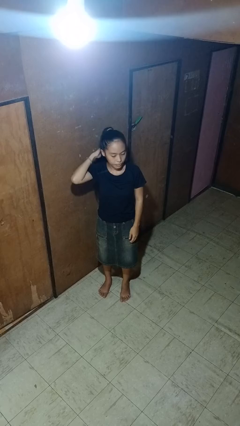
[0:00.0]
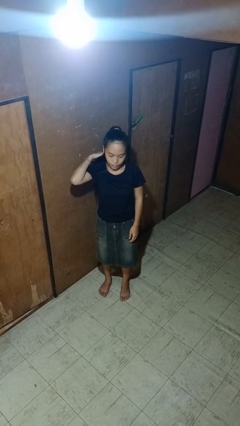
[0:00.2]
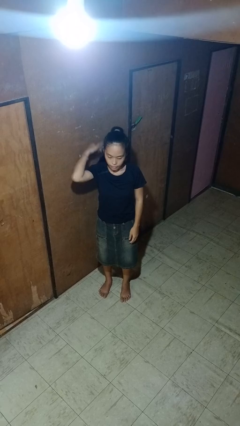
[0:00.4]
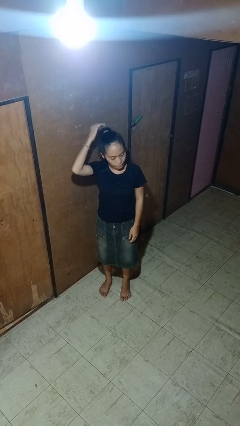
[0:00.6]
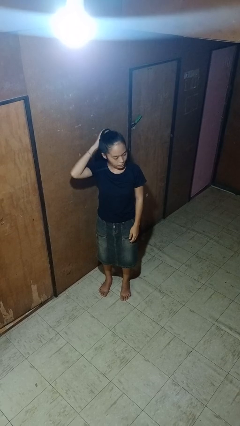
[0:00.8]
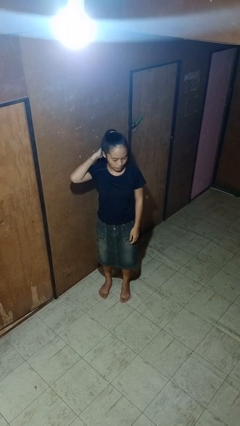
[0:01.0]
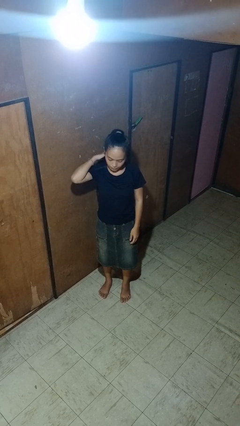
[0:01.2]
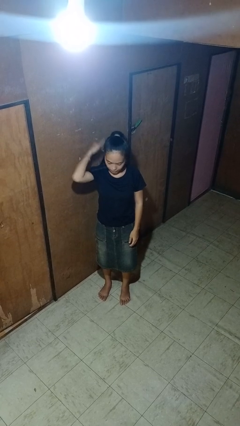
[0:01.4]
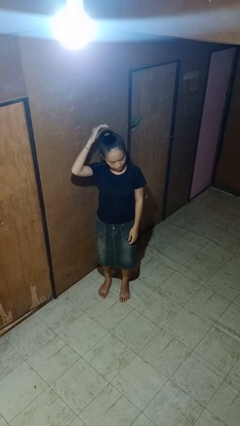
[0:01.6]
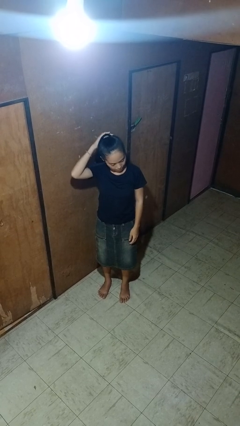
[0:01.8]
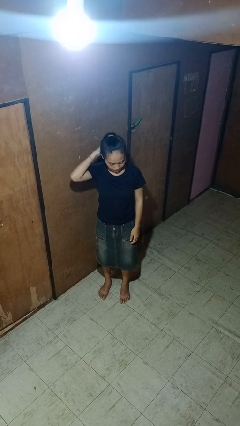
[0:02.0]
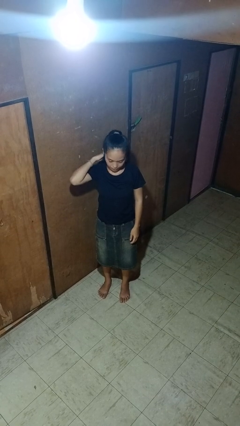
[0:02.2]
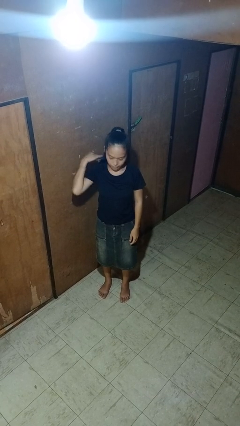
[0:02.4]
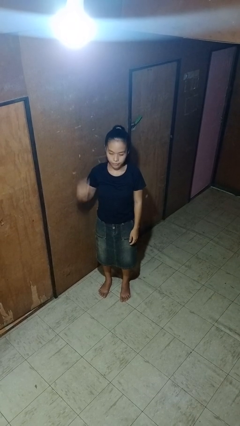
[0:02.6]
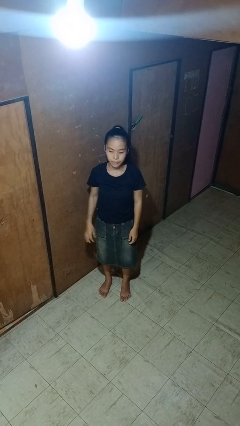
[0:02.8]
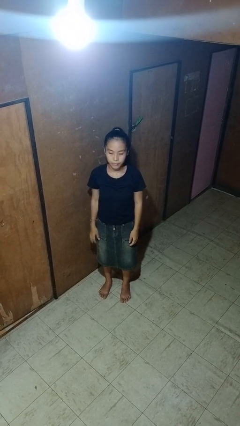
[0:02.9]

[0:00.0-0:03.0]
person strokes hair

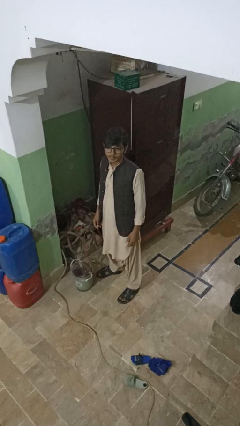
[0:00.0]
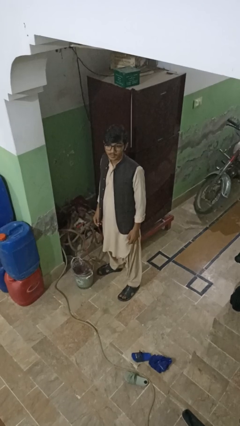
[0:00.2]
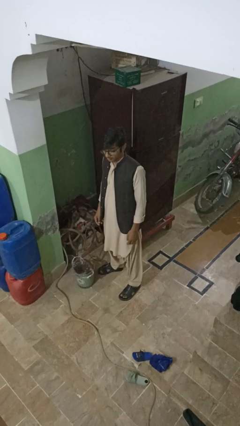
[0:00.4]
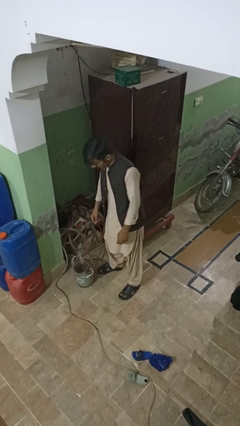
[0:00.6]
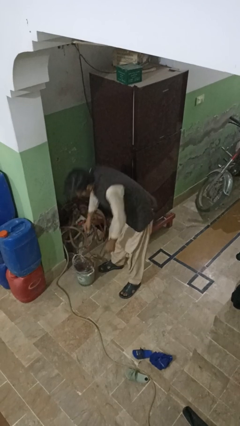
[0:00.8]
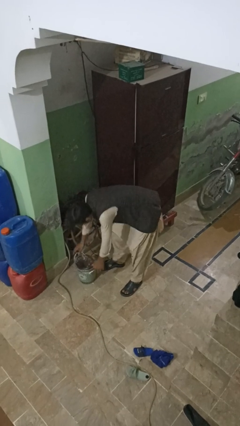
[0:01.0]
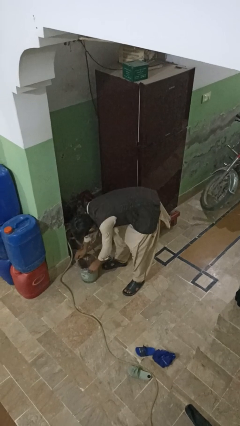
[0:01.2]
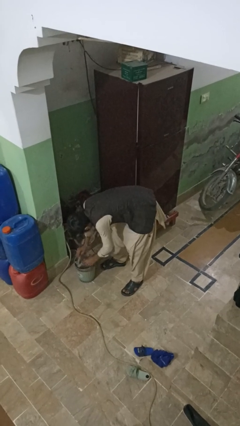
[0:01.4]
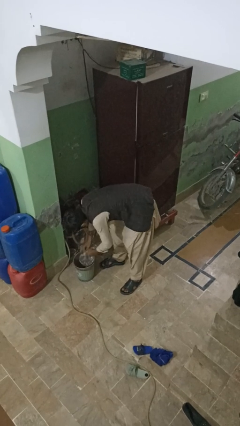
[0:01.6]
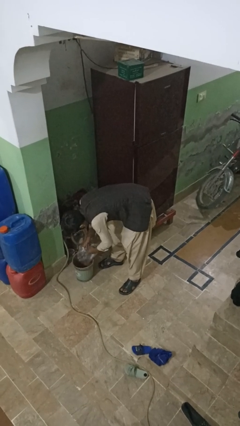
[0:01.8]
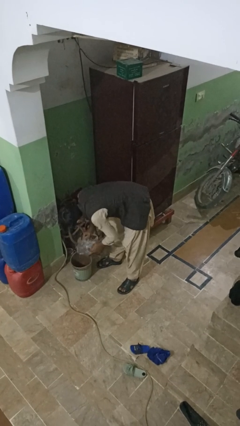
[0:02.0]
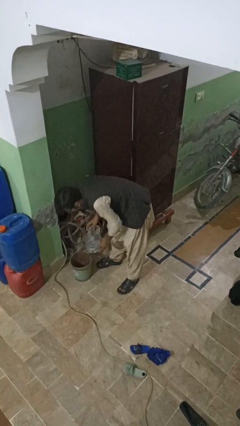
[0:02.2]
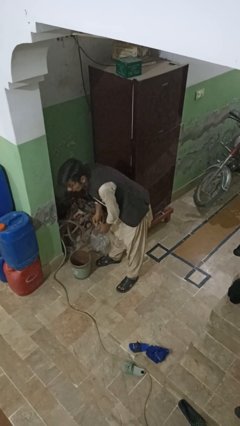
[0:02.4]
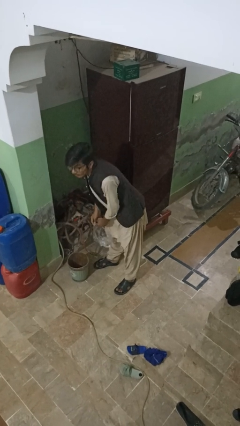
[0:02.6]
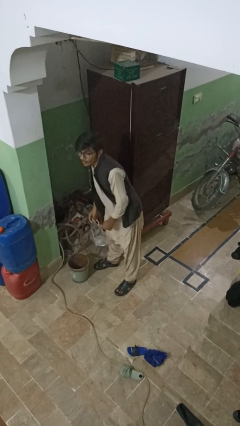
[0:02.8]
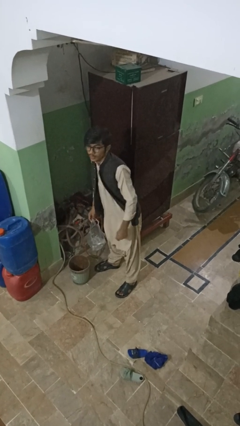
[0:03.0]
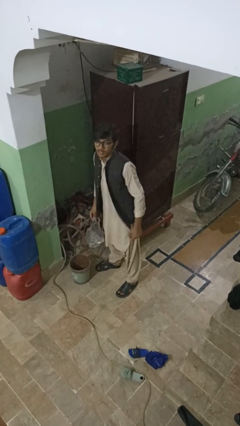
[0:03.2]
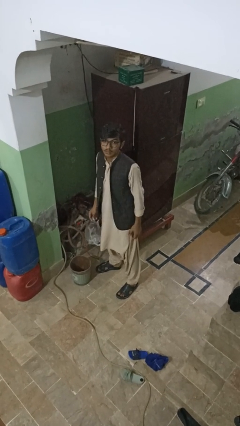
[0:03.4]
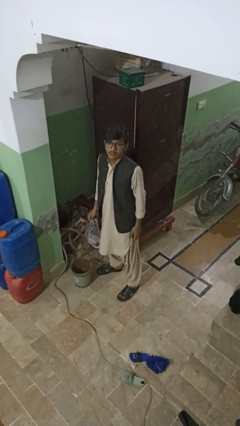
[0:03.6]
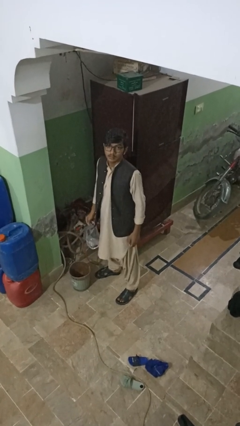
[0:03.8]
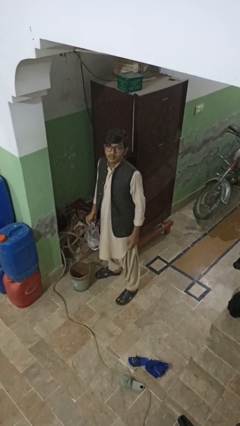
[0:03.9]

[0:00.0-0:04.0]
person removes trashbag from trashcan

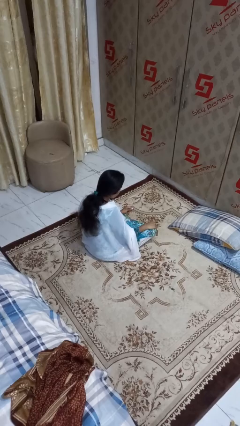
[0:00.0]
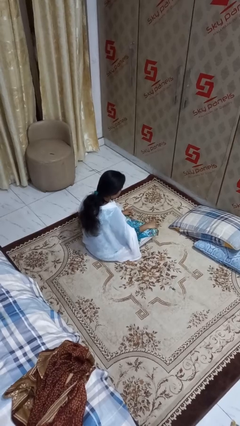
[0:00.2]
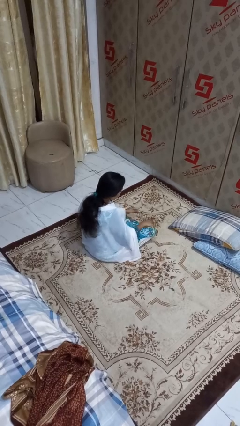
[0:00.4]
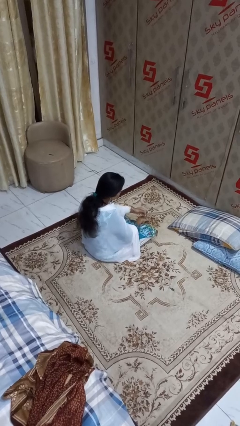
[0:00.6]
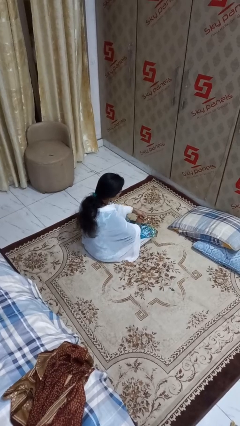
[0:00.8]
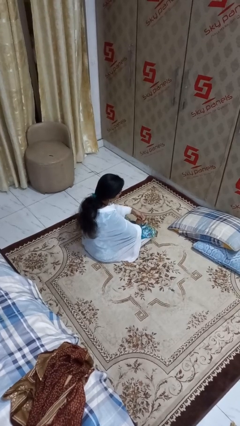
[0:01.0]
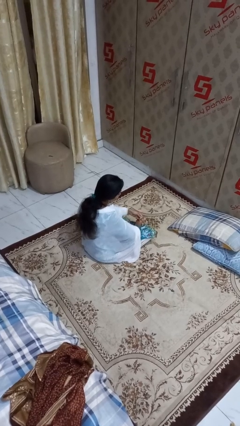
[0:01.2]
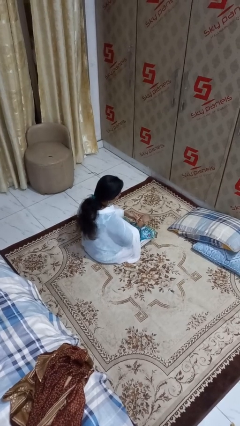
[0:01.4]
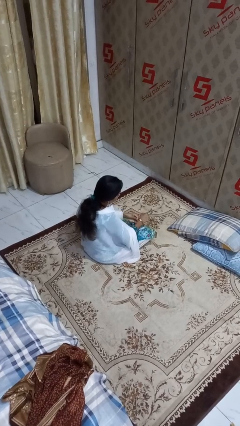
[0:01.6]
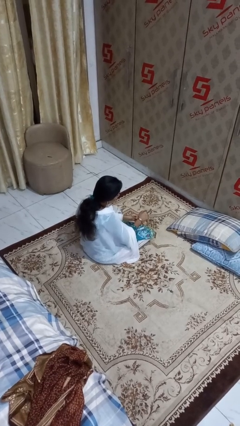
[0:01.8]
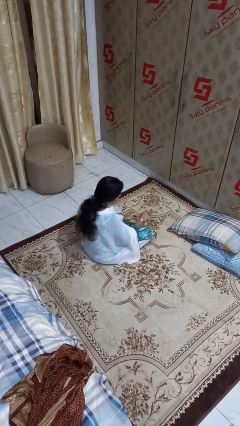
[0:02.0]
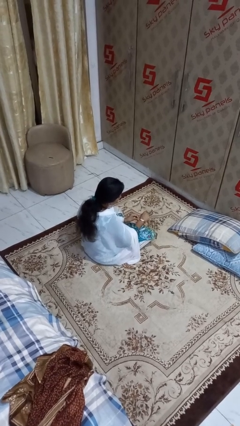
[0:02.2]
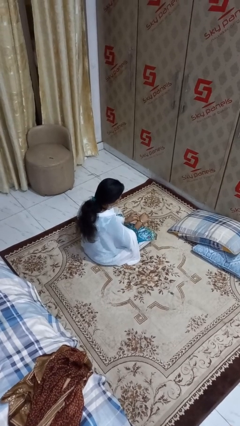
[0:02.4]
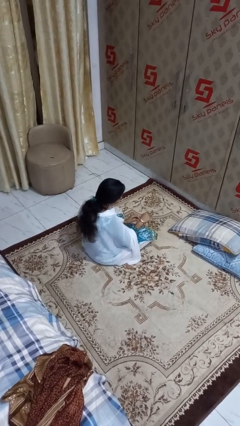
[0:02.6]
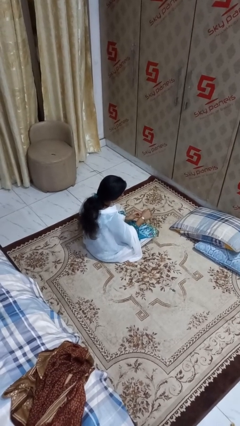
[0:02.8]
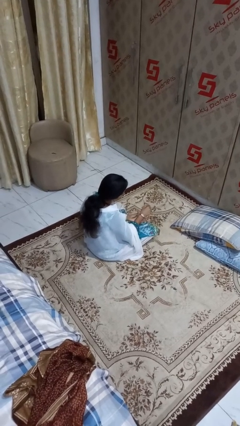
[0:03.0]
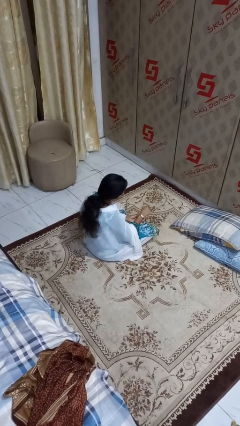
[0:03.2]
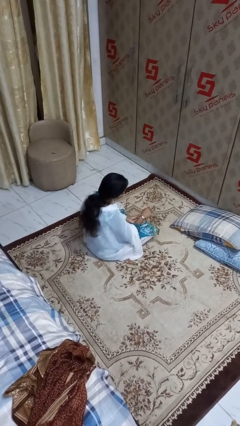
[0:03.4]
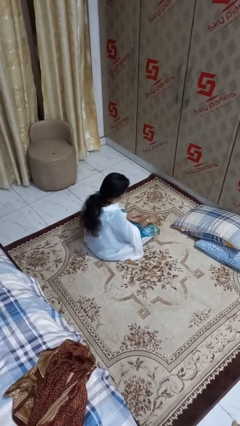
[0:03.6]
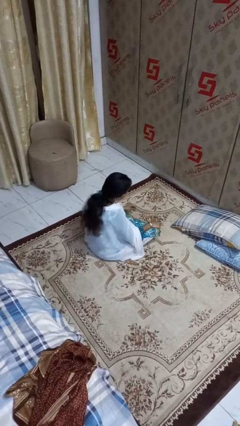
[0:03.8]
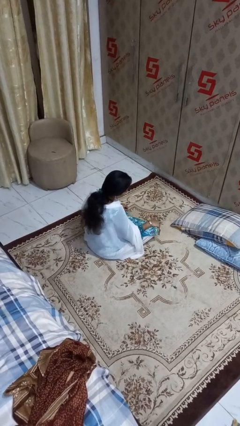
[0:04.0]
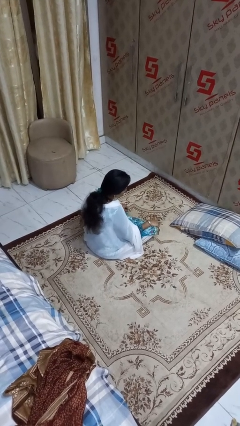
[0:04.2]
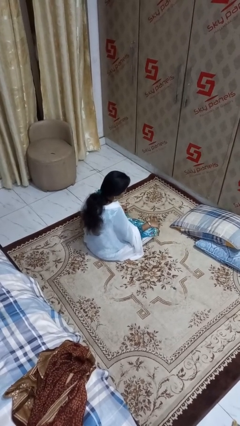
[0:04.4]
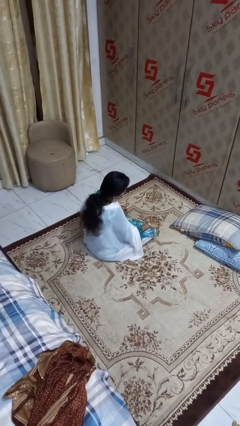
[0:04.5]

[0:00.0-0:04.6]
person puts on wristwatch

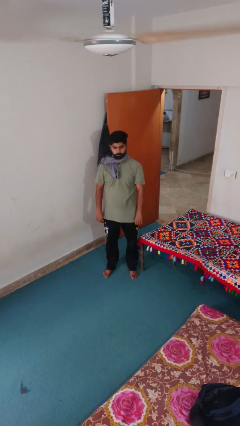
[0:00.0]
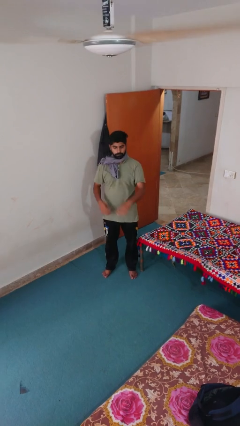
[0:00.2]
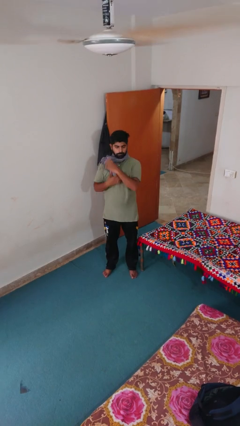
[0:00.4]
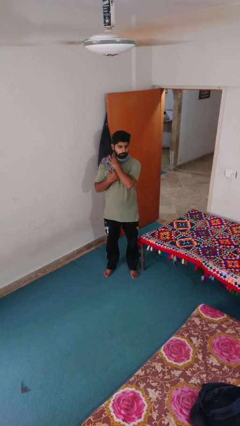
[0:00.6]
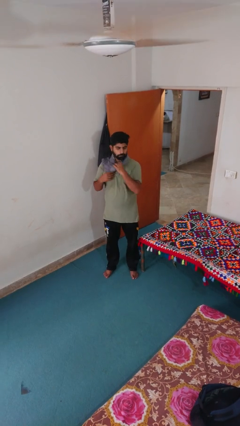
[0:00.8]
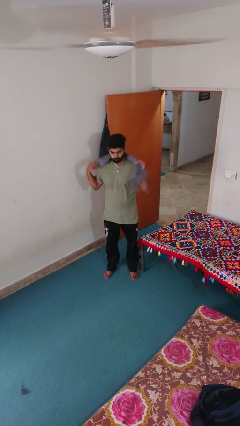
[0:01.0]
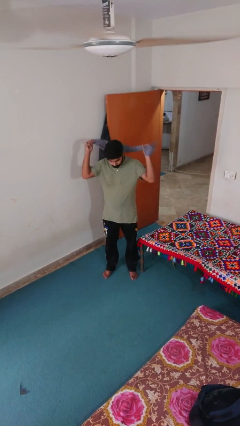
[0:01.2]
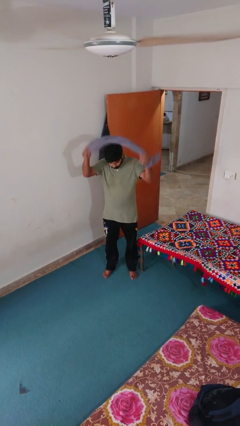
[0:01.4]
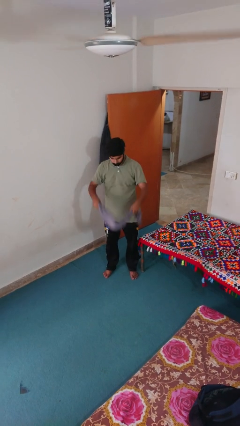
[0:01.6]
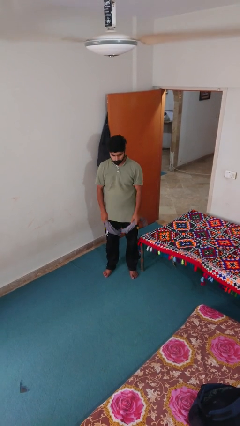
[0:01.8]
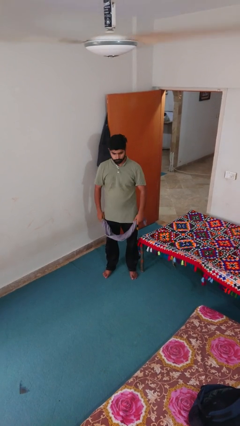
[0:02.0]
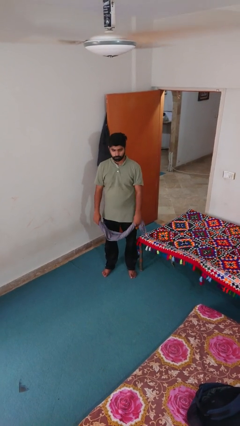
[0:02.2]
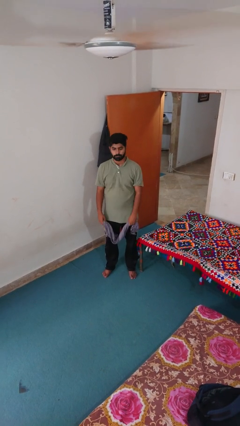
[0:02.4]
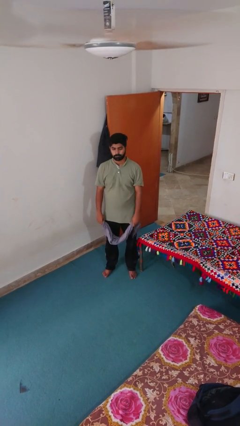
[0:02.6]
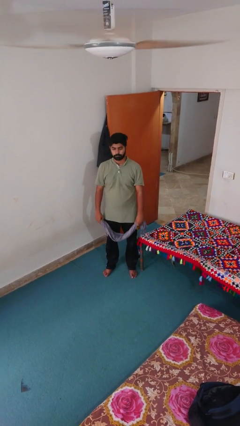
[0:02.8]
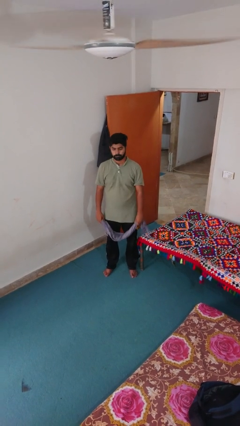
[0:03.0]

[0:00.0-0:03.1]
person takes off scarf

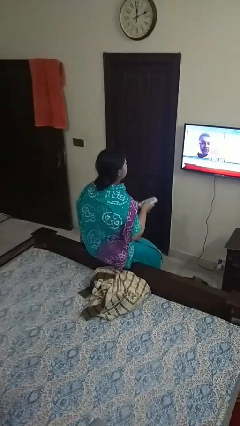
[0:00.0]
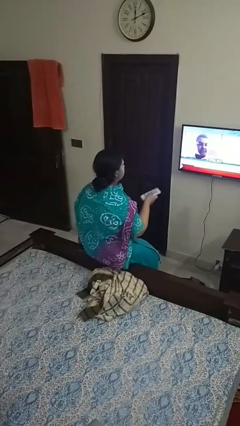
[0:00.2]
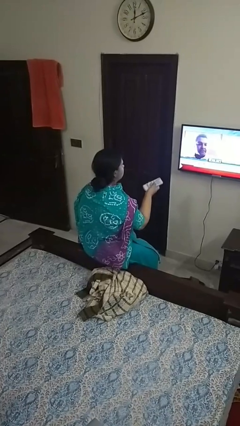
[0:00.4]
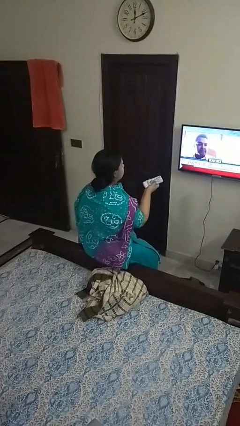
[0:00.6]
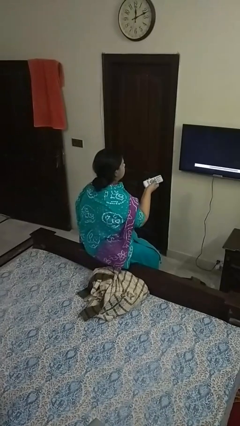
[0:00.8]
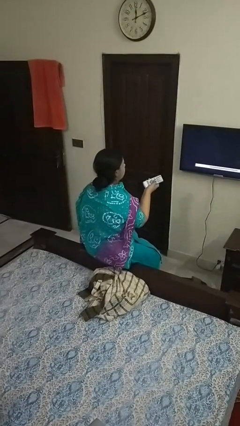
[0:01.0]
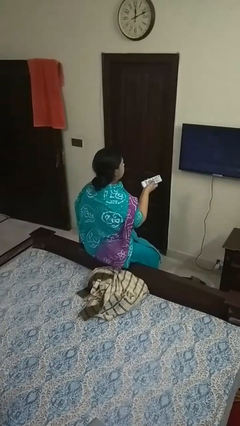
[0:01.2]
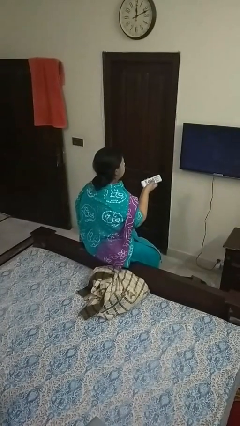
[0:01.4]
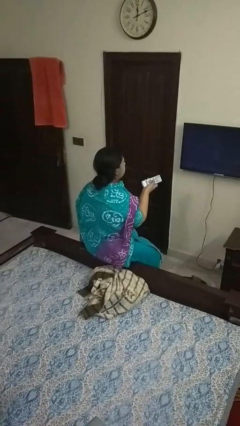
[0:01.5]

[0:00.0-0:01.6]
person uses television remote

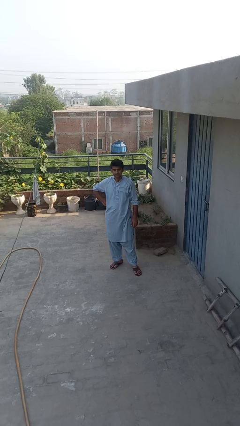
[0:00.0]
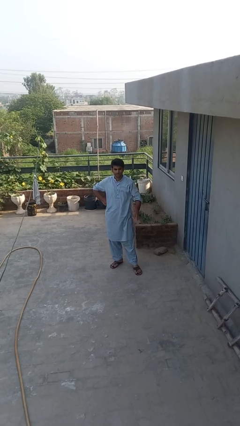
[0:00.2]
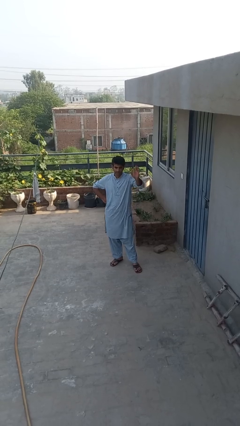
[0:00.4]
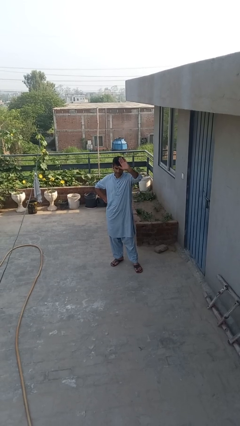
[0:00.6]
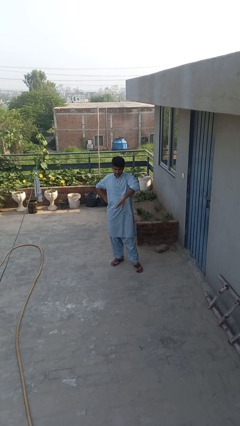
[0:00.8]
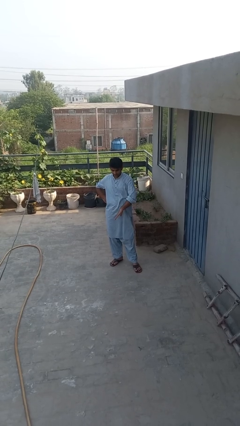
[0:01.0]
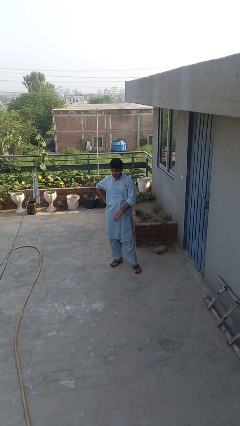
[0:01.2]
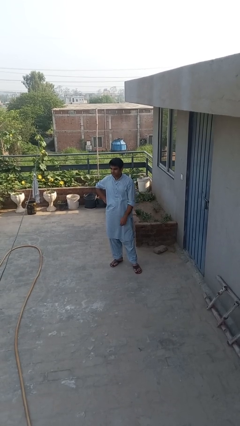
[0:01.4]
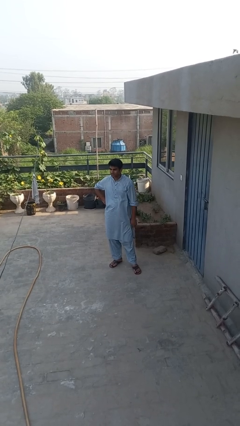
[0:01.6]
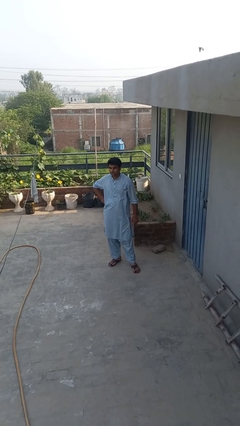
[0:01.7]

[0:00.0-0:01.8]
person gestures swipe down
